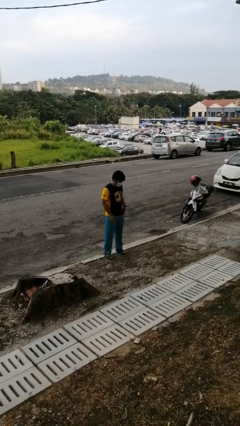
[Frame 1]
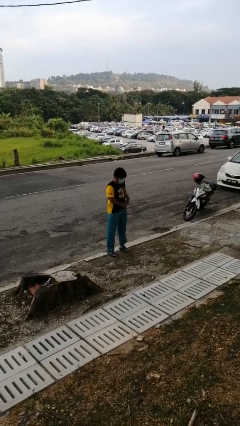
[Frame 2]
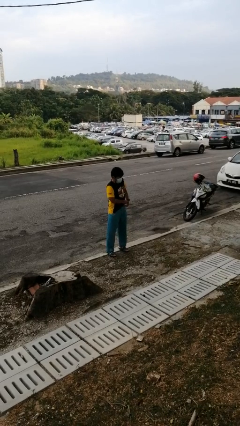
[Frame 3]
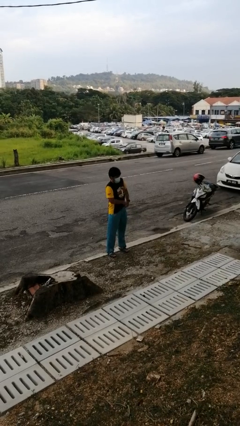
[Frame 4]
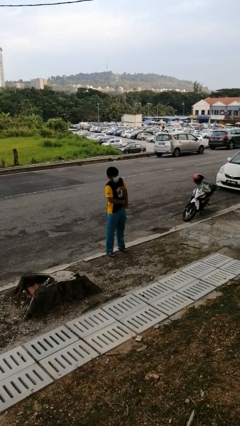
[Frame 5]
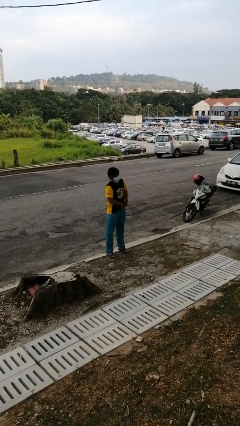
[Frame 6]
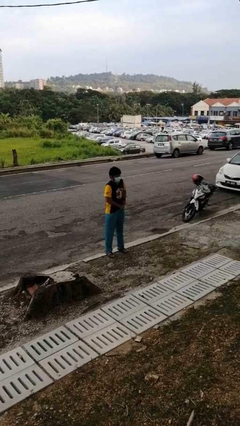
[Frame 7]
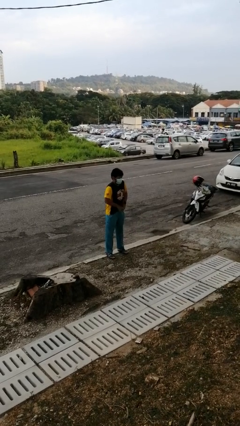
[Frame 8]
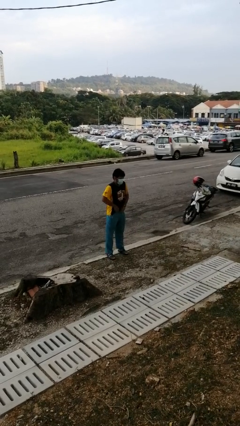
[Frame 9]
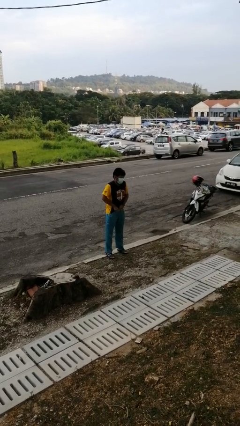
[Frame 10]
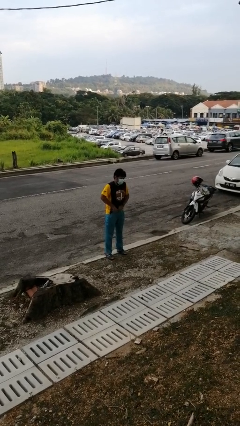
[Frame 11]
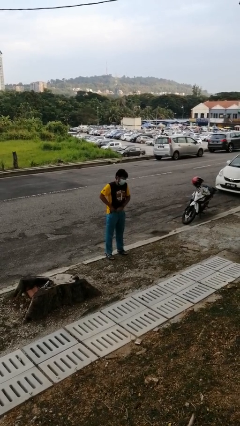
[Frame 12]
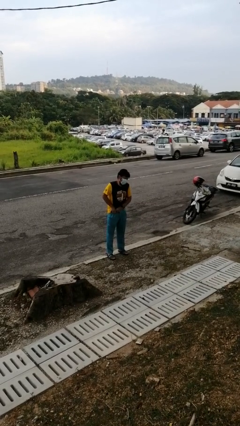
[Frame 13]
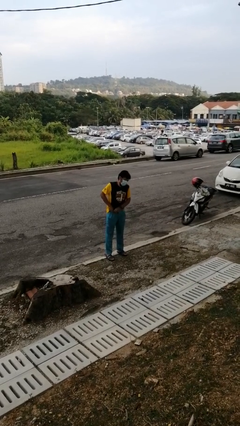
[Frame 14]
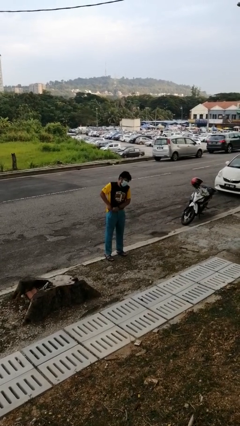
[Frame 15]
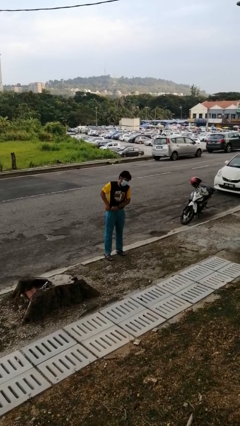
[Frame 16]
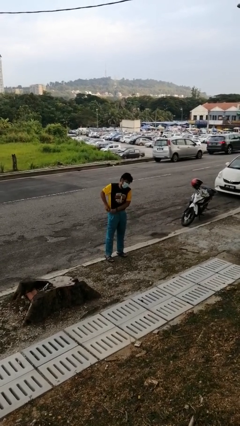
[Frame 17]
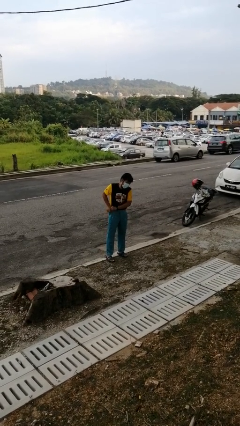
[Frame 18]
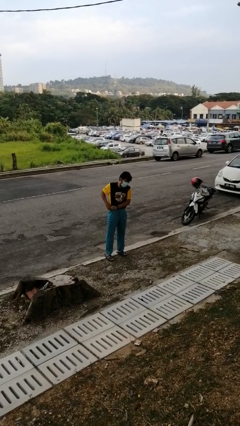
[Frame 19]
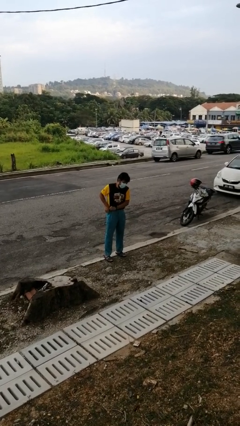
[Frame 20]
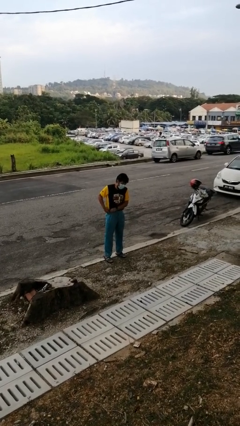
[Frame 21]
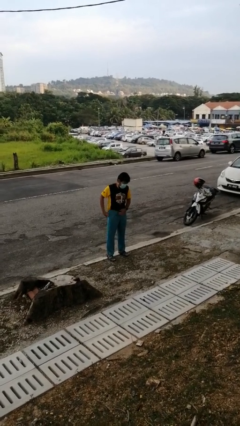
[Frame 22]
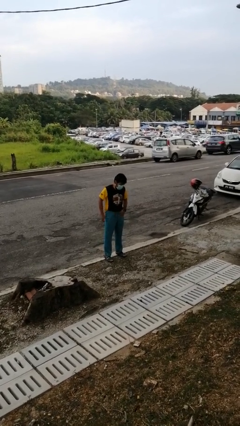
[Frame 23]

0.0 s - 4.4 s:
person tucks in shirt

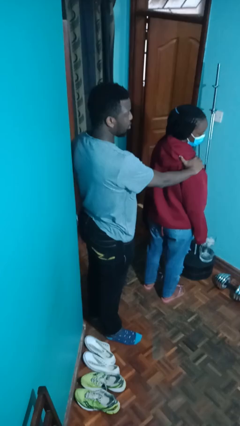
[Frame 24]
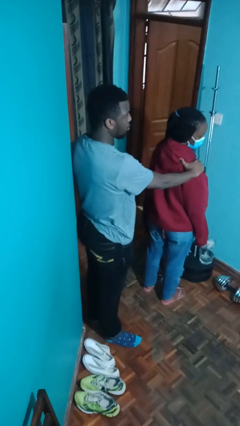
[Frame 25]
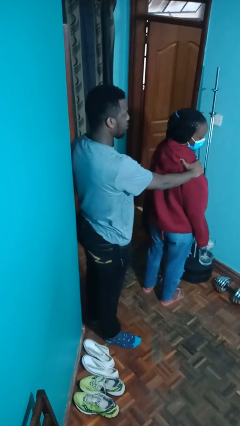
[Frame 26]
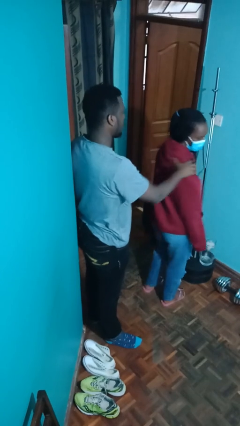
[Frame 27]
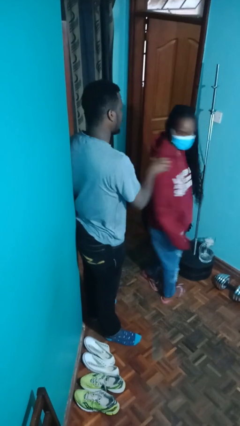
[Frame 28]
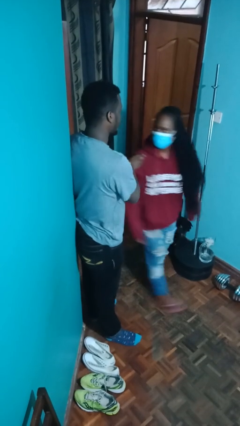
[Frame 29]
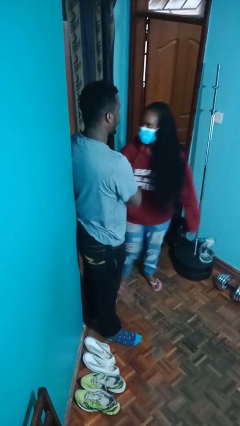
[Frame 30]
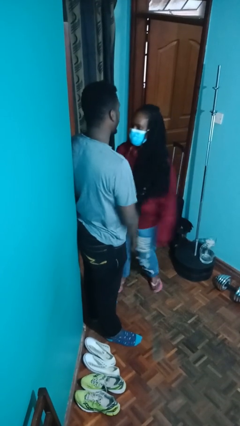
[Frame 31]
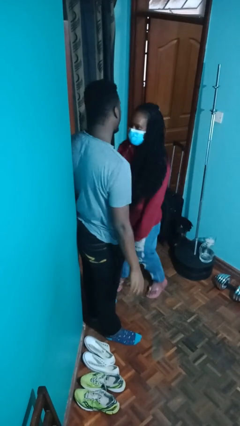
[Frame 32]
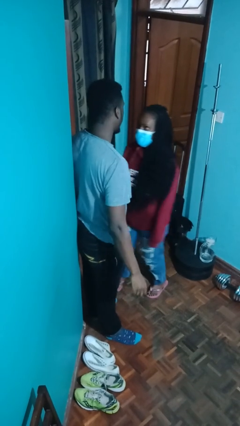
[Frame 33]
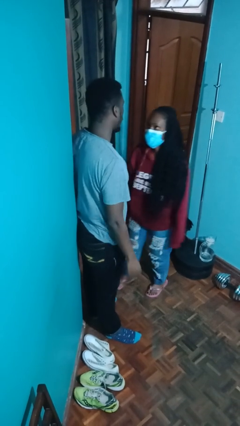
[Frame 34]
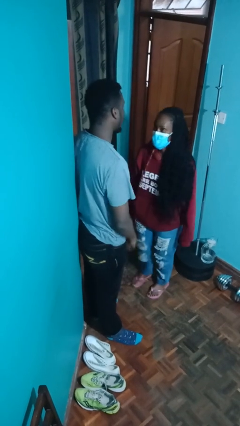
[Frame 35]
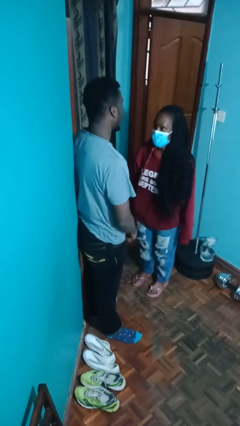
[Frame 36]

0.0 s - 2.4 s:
person spins person around

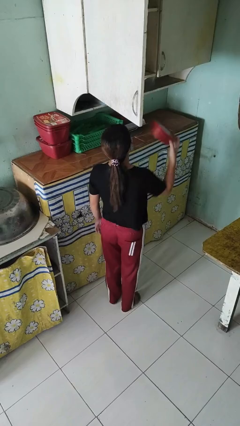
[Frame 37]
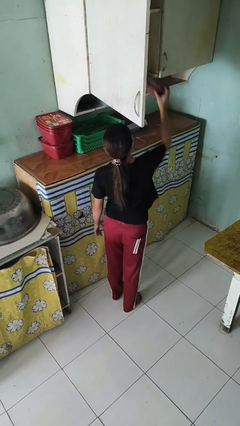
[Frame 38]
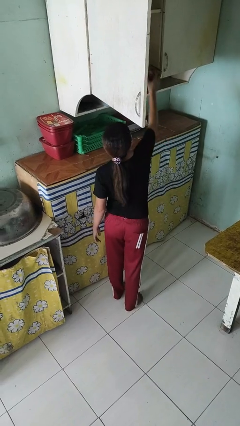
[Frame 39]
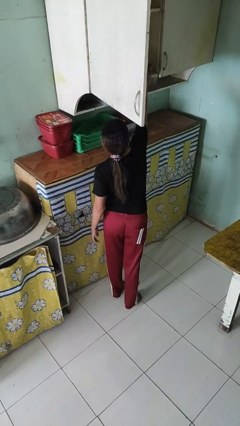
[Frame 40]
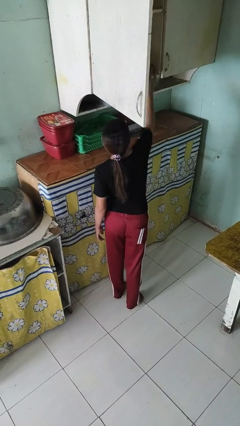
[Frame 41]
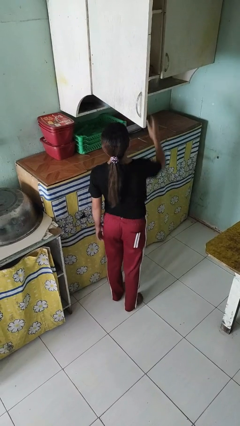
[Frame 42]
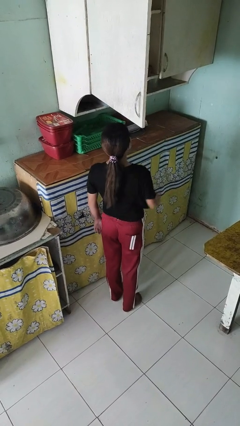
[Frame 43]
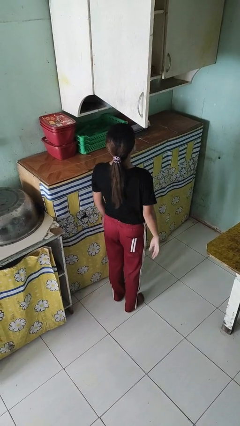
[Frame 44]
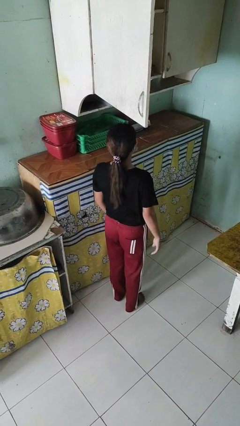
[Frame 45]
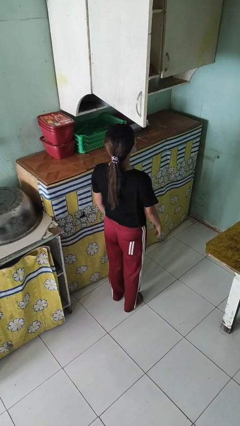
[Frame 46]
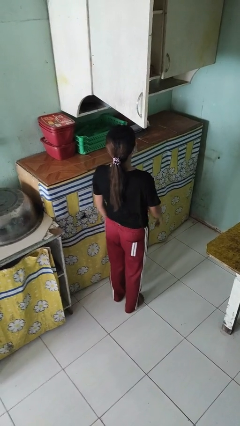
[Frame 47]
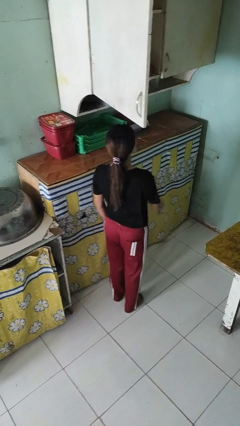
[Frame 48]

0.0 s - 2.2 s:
person puts object in cabinet

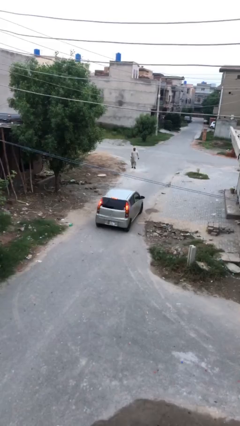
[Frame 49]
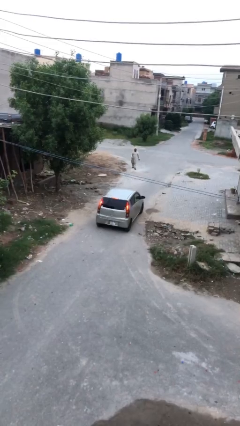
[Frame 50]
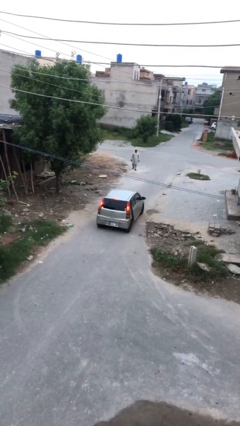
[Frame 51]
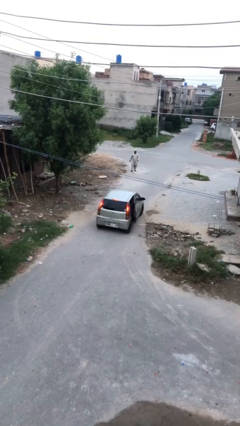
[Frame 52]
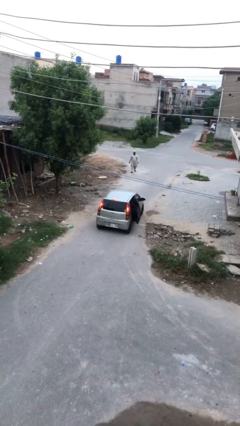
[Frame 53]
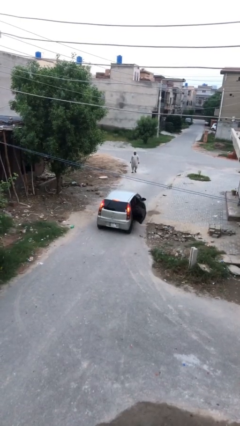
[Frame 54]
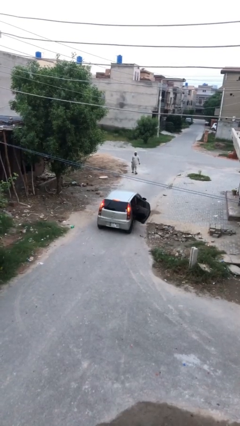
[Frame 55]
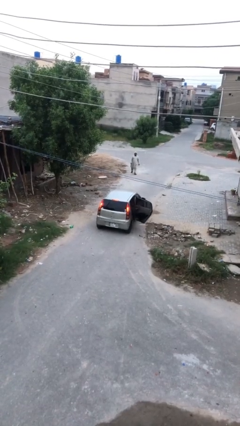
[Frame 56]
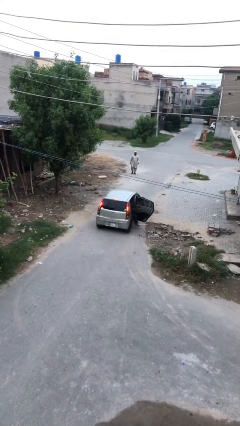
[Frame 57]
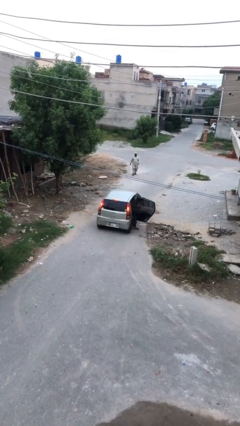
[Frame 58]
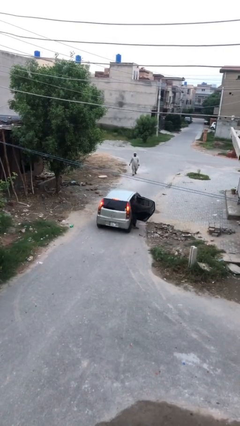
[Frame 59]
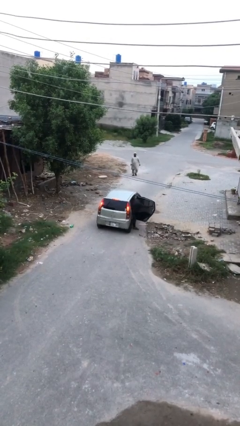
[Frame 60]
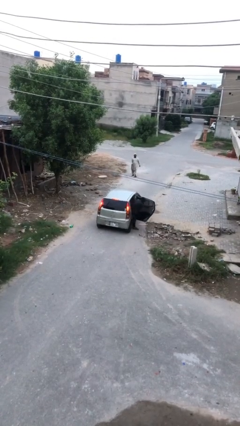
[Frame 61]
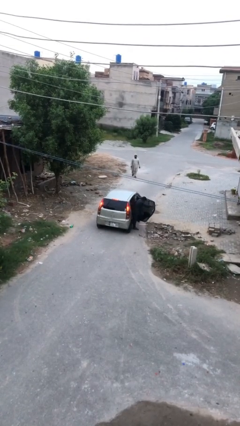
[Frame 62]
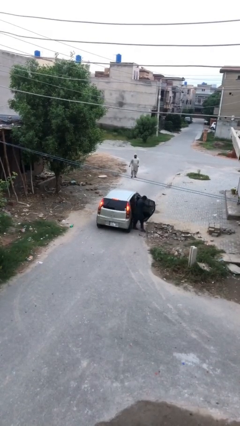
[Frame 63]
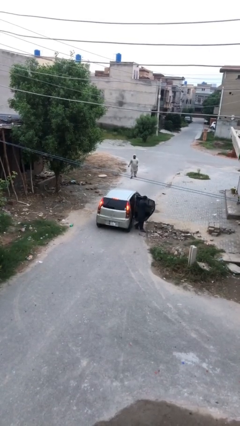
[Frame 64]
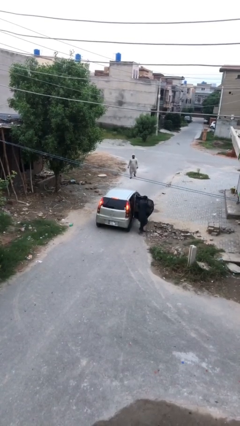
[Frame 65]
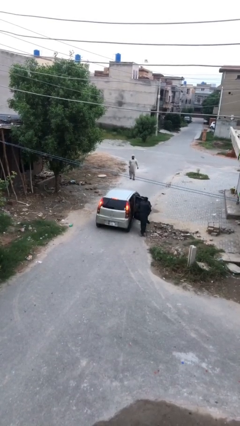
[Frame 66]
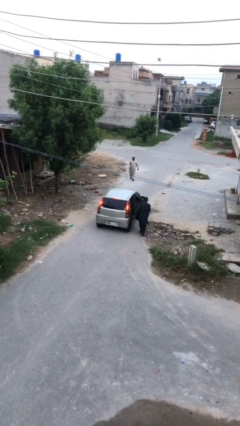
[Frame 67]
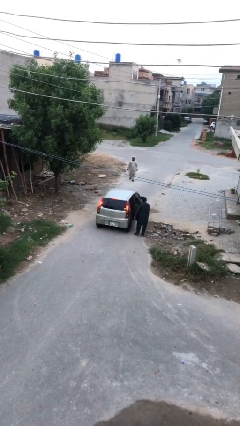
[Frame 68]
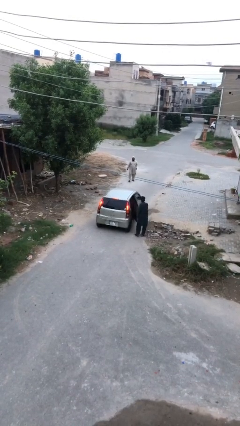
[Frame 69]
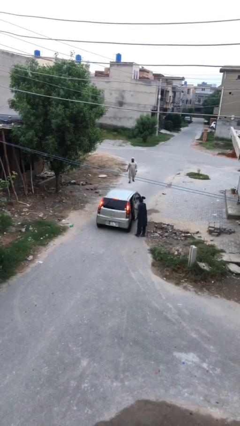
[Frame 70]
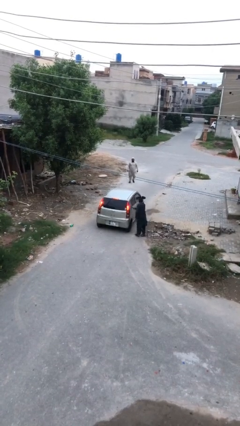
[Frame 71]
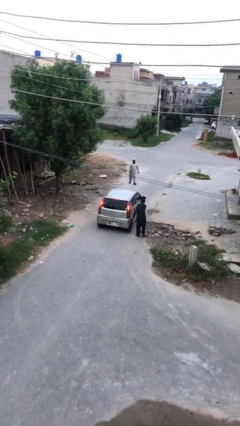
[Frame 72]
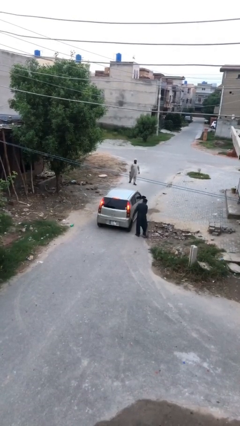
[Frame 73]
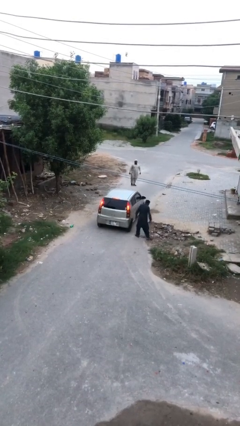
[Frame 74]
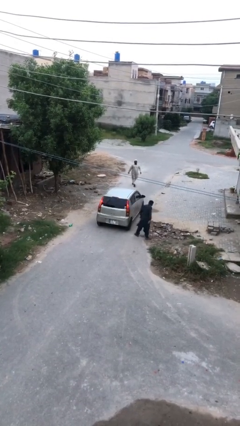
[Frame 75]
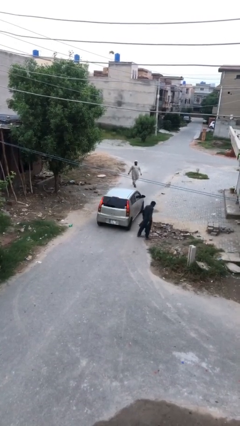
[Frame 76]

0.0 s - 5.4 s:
car drops off person

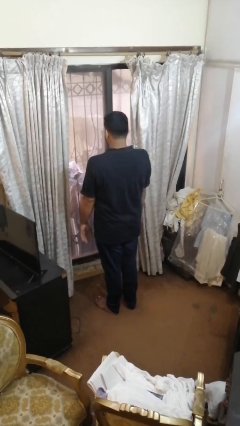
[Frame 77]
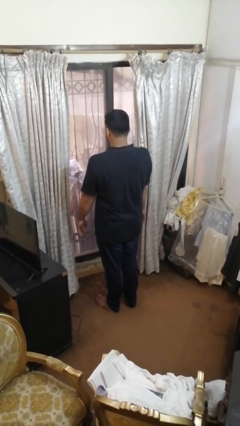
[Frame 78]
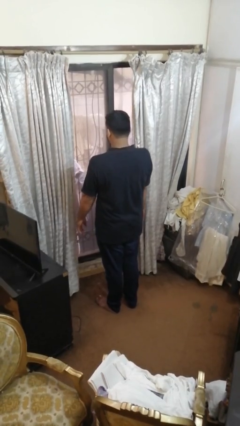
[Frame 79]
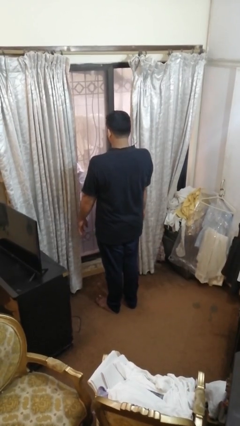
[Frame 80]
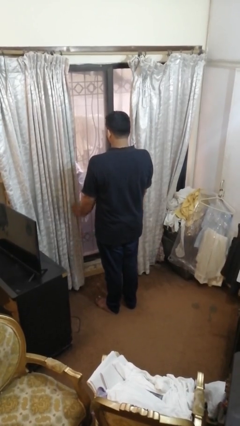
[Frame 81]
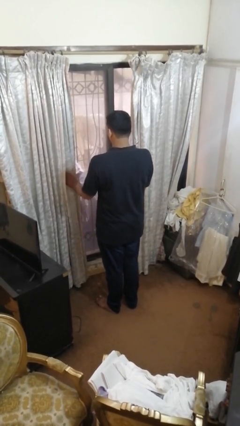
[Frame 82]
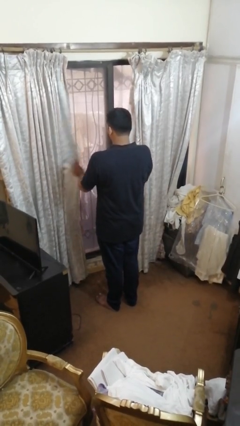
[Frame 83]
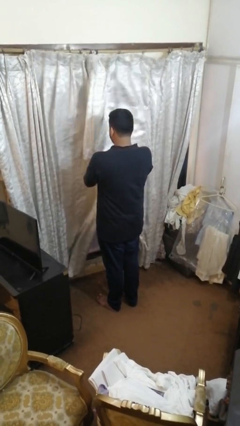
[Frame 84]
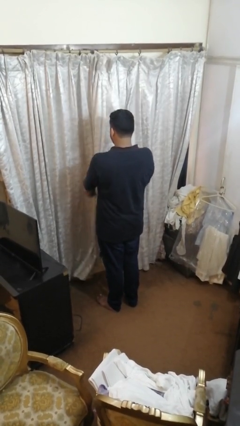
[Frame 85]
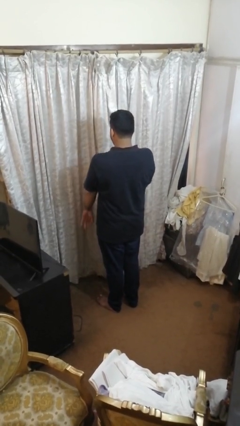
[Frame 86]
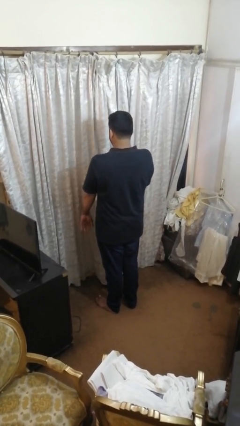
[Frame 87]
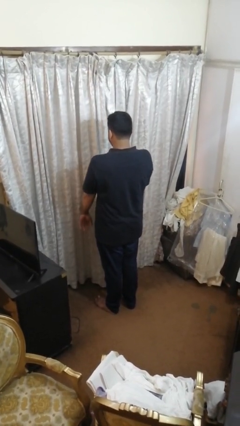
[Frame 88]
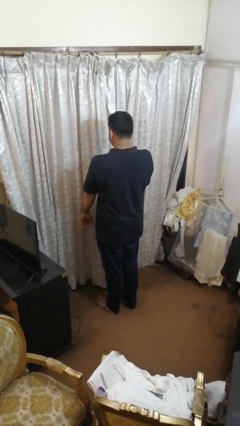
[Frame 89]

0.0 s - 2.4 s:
person closes curtains

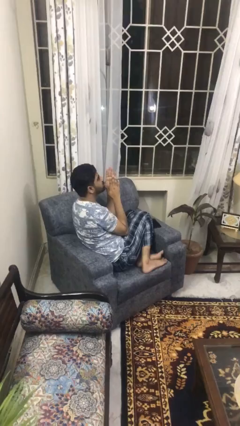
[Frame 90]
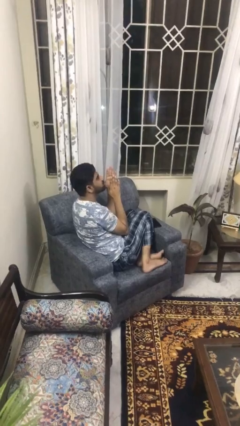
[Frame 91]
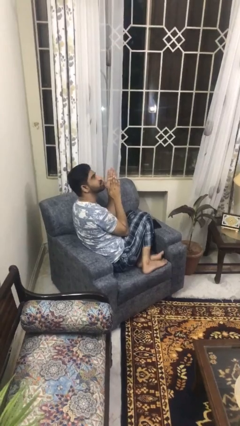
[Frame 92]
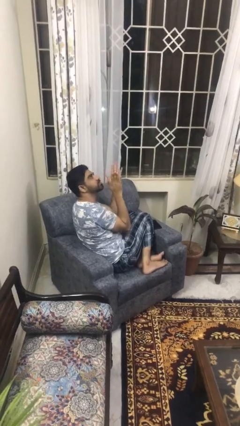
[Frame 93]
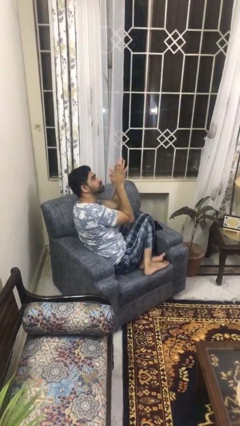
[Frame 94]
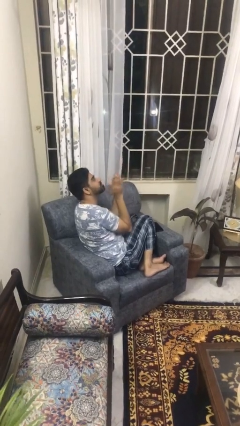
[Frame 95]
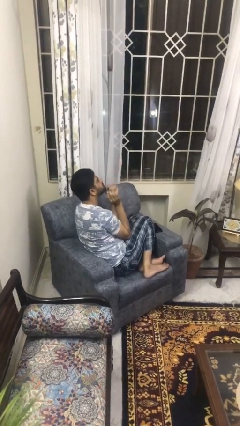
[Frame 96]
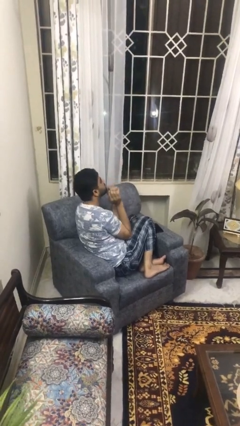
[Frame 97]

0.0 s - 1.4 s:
person swats bug
